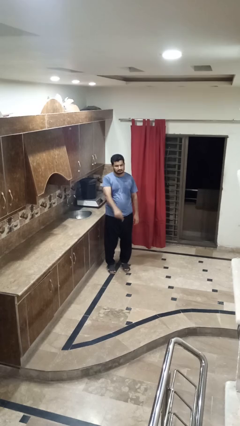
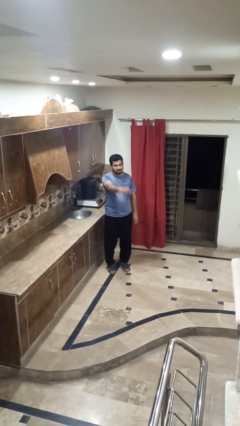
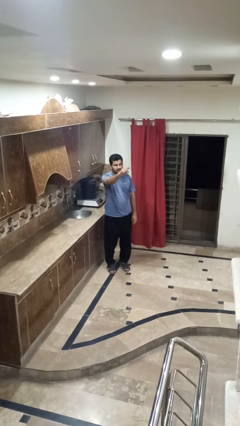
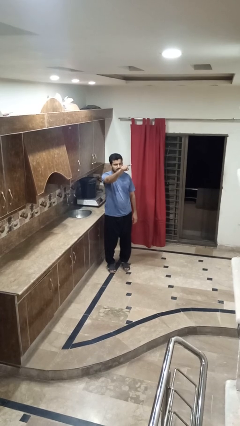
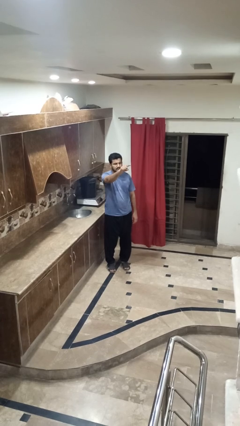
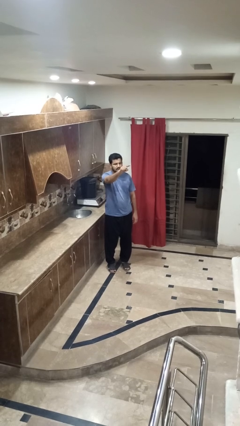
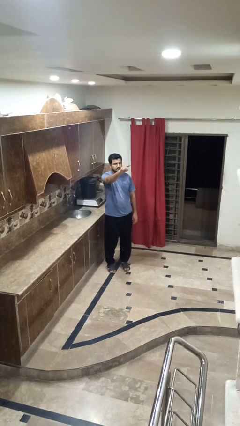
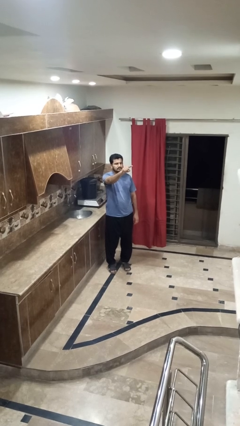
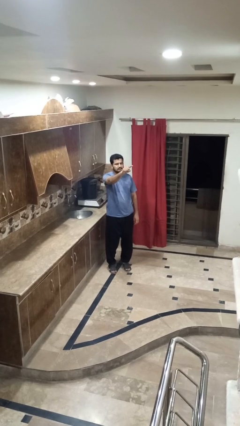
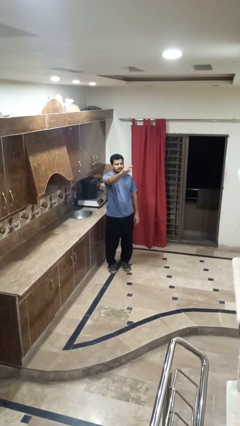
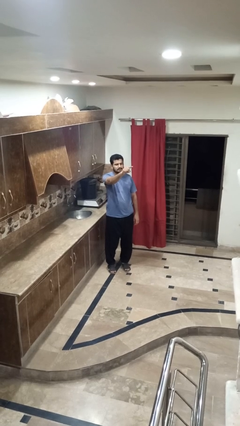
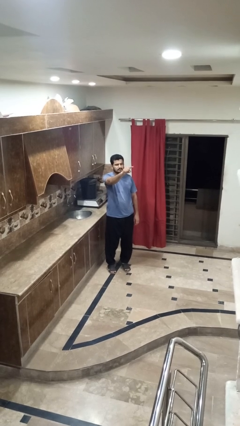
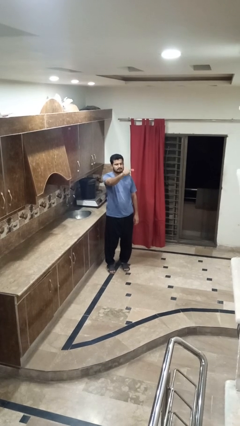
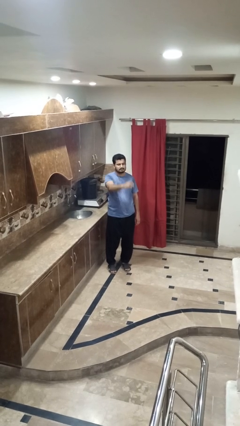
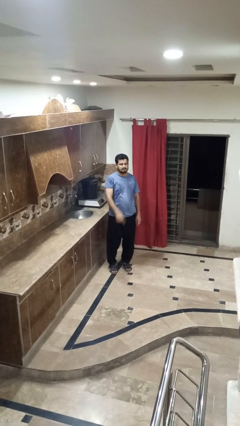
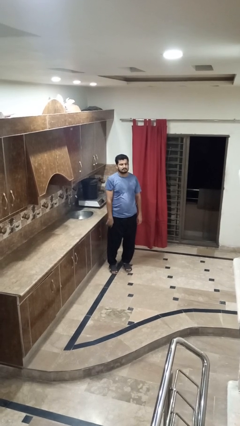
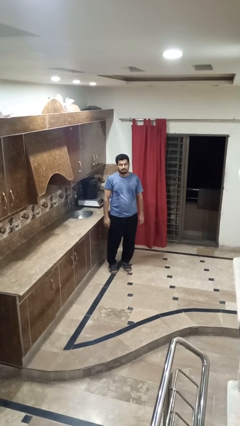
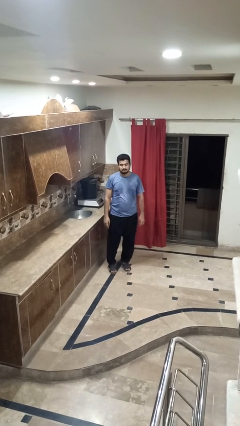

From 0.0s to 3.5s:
person points at person

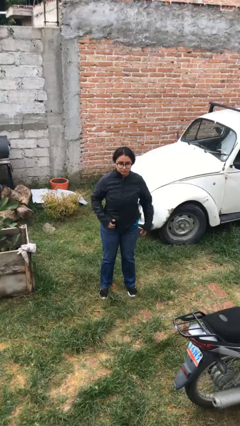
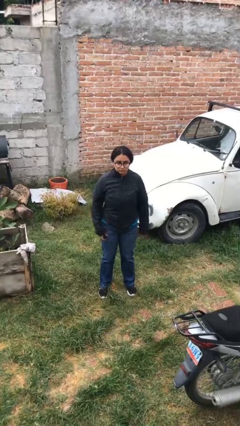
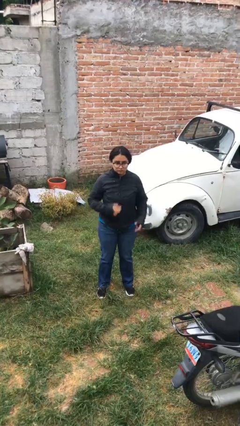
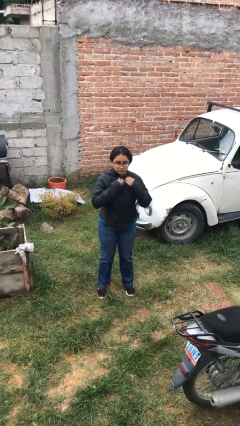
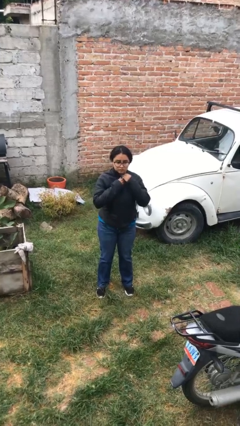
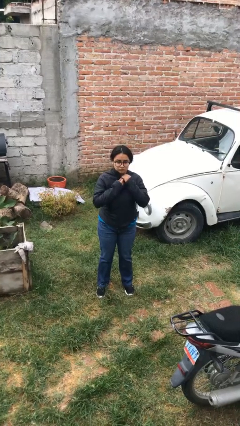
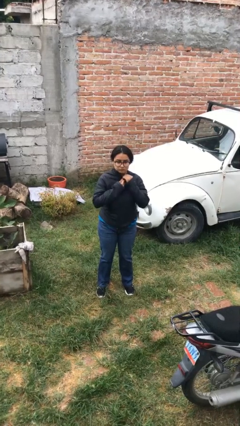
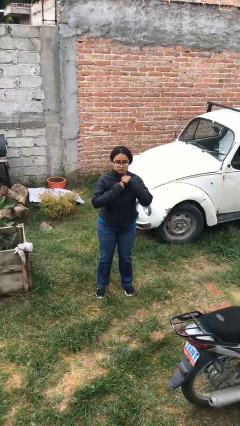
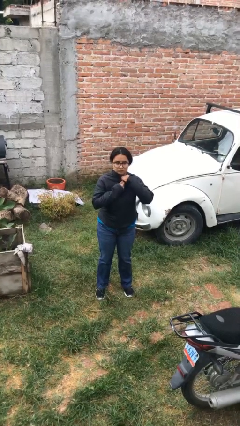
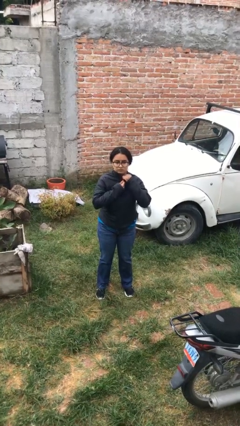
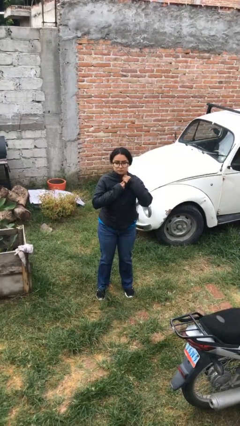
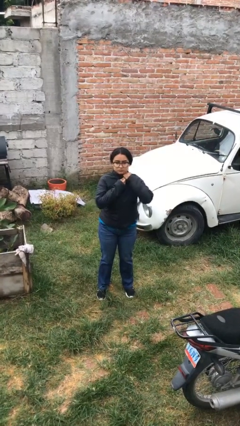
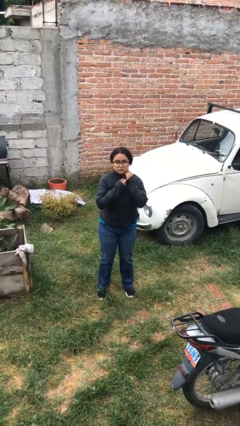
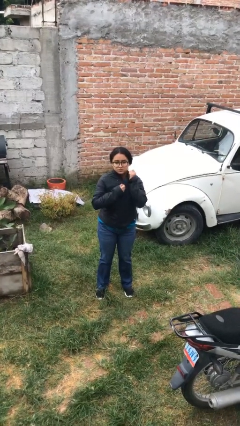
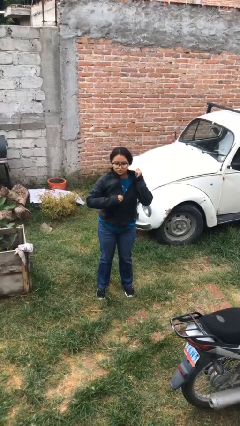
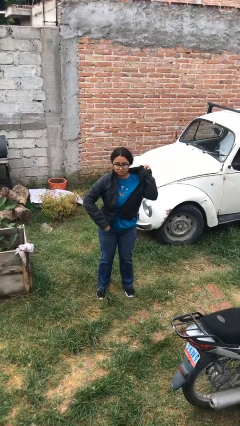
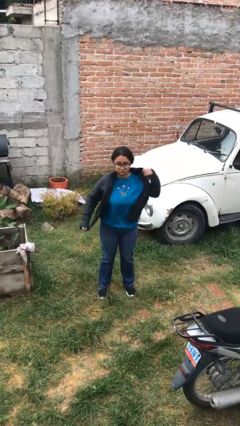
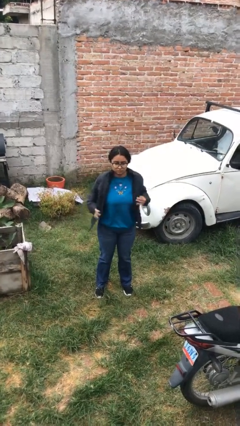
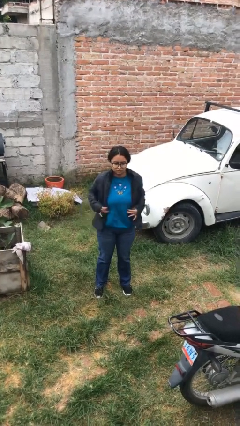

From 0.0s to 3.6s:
person unzips jacket

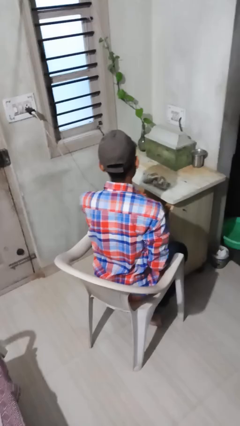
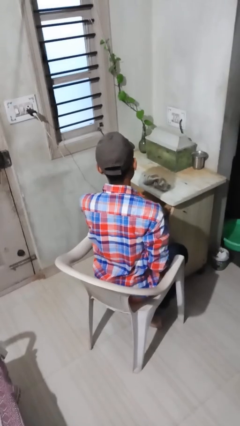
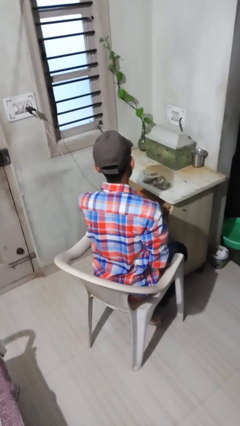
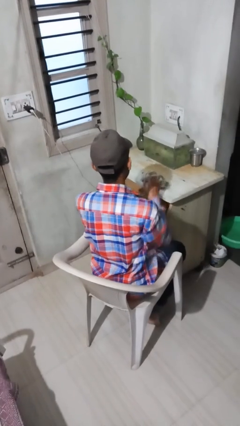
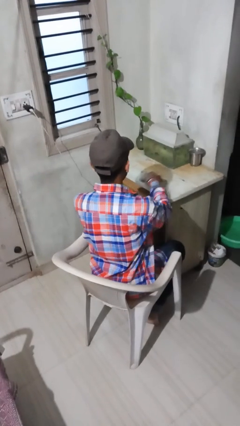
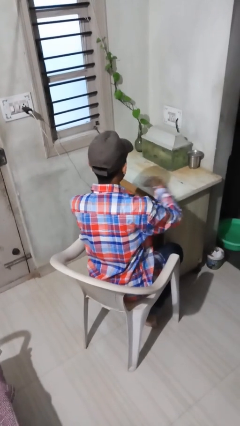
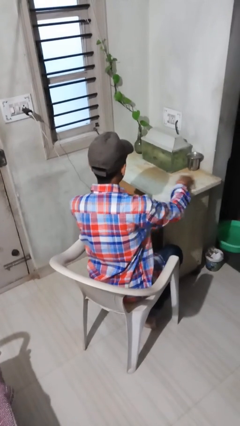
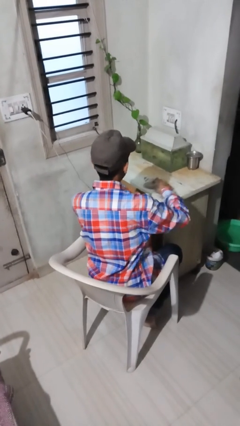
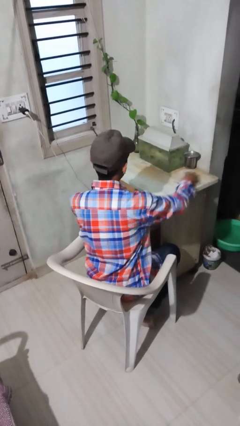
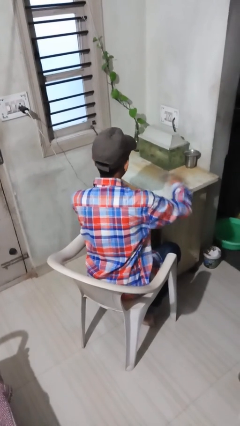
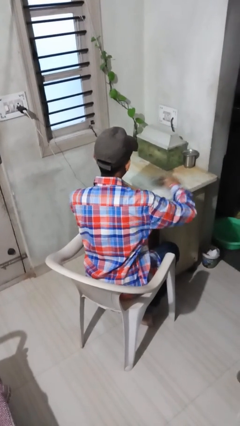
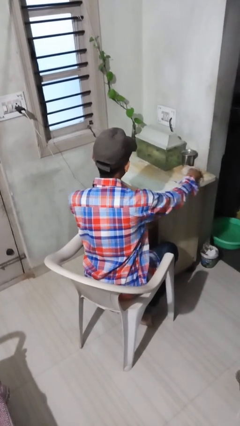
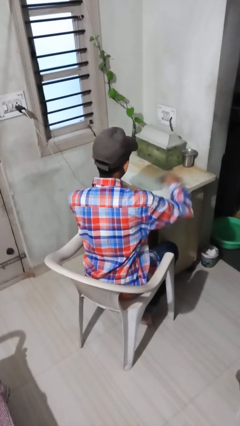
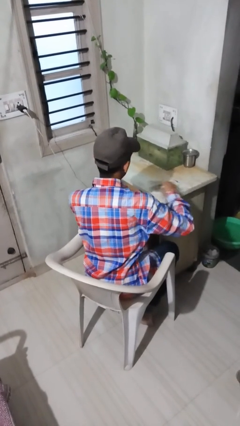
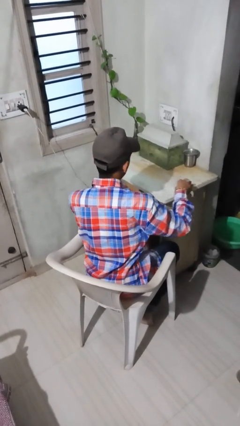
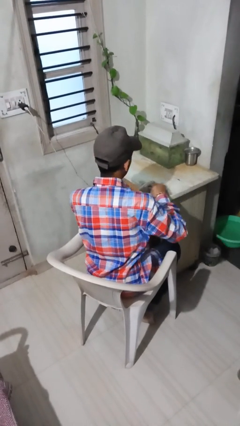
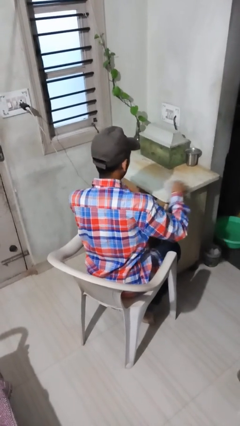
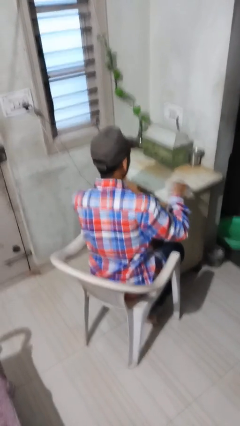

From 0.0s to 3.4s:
person cleans table with rag

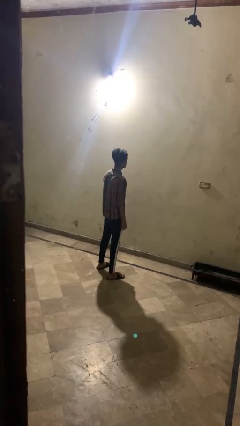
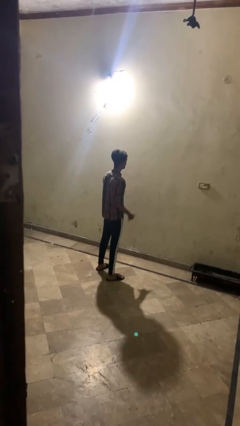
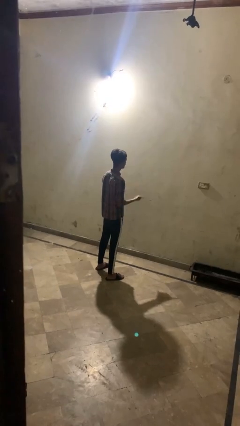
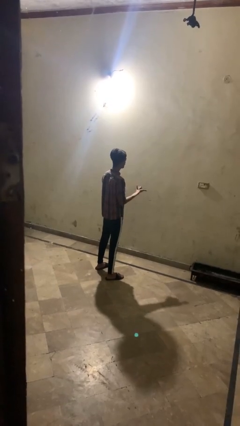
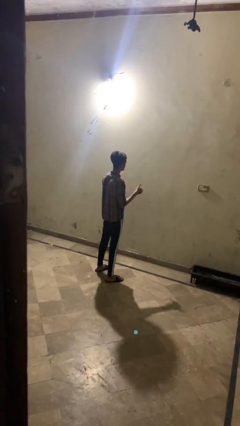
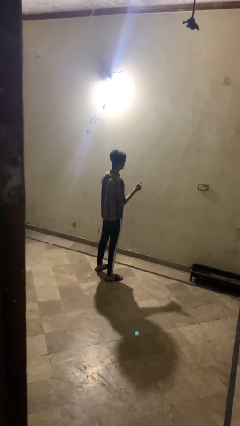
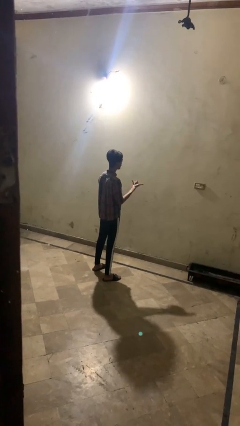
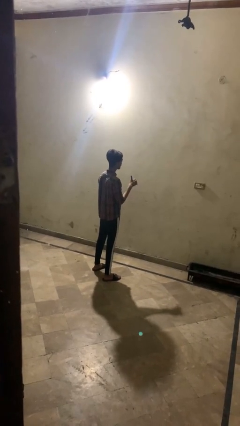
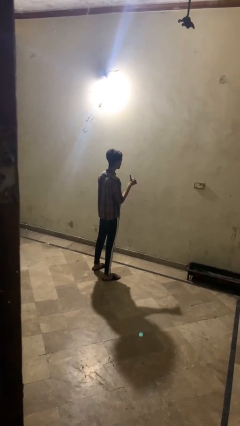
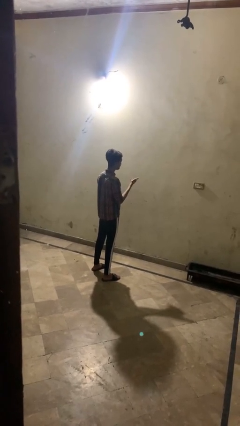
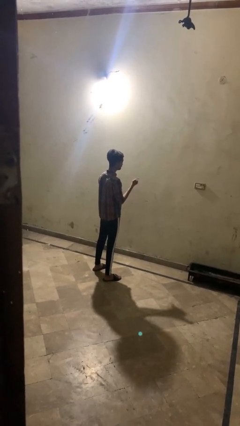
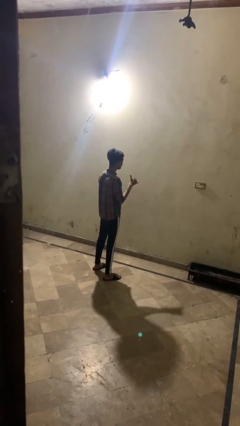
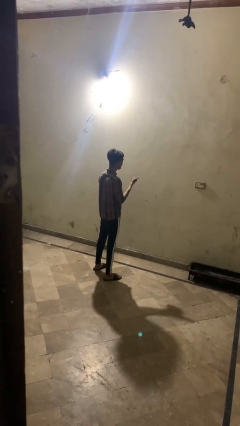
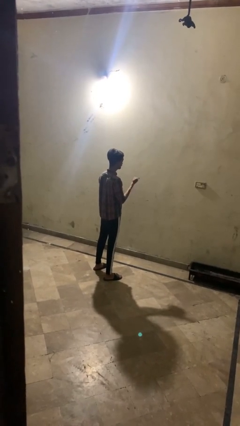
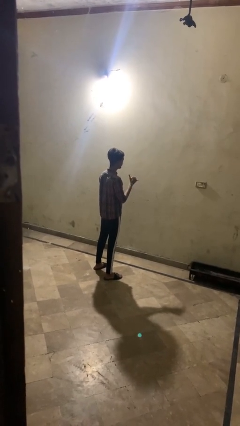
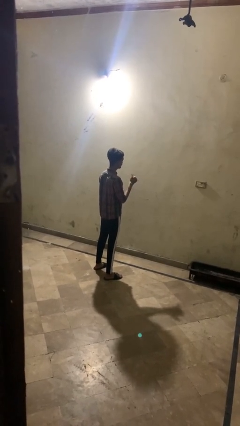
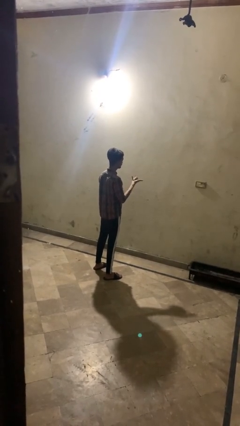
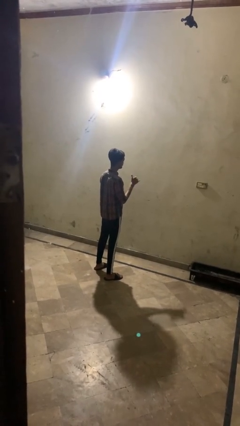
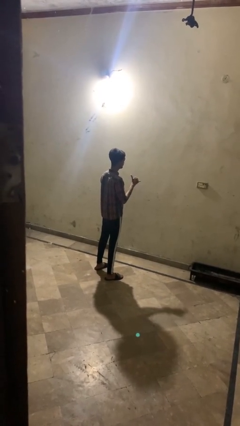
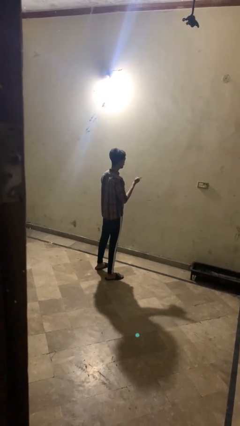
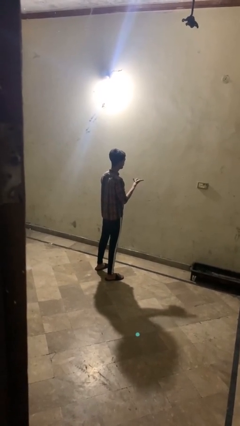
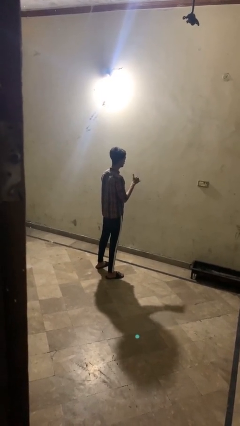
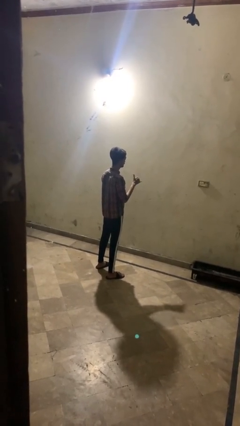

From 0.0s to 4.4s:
person gestures hang loose

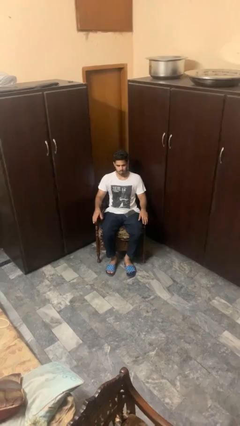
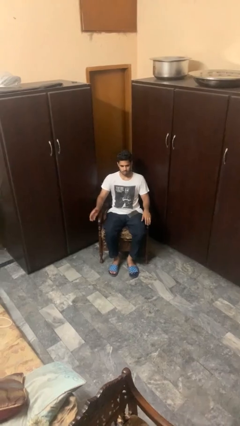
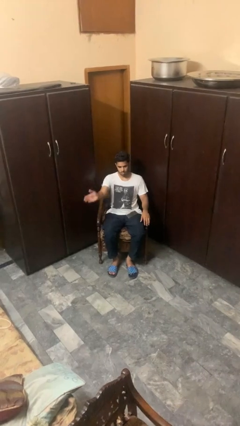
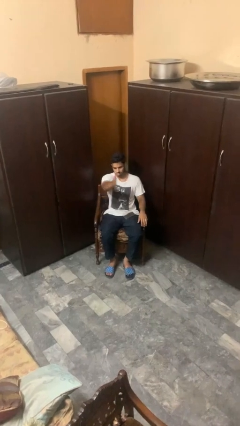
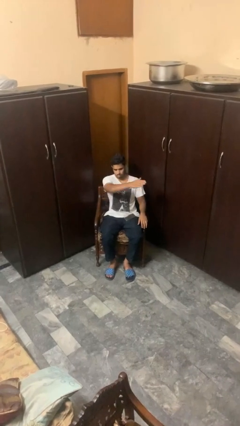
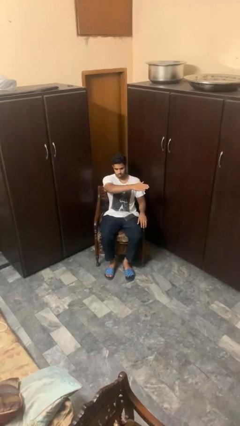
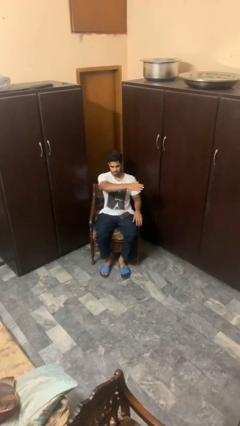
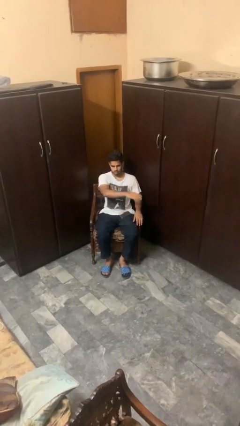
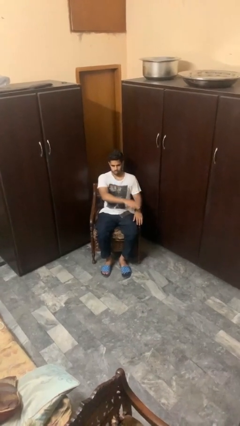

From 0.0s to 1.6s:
person gestures swipe left

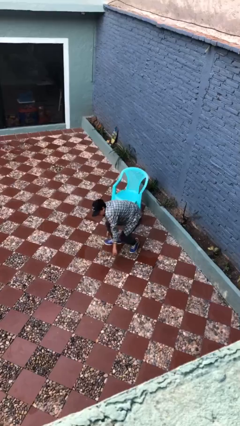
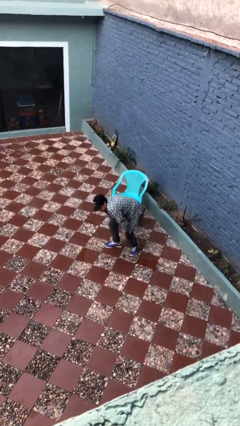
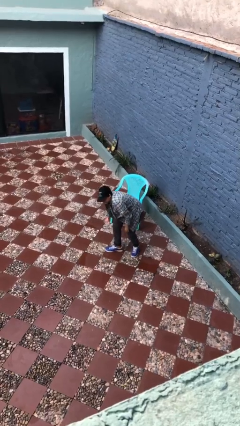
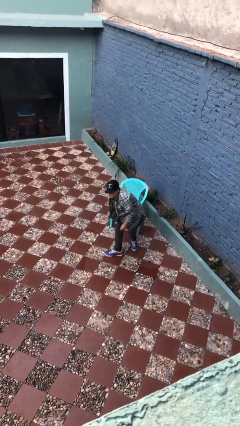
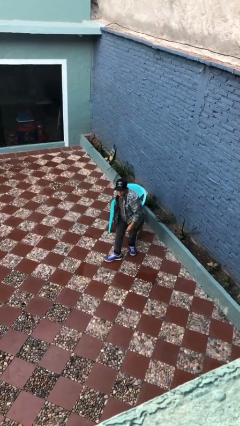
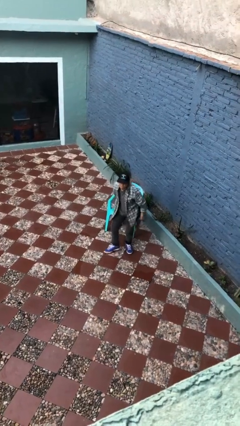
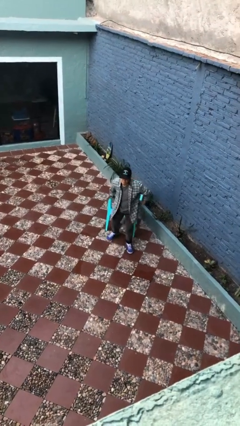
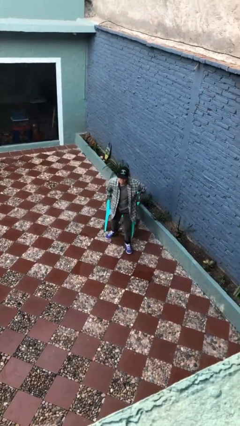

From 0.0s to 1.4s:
person stands up from floor
